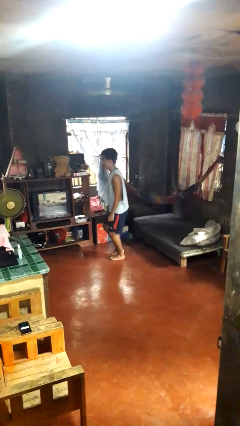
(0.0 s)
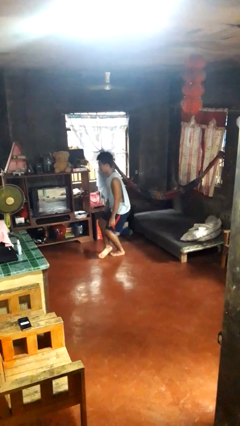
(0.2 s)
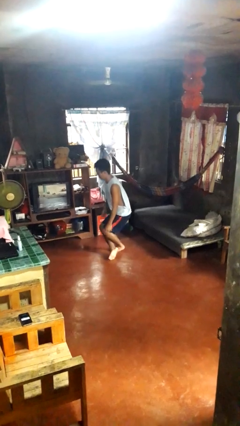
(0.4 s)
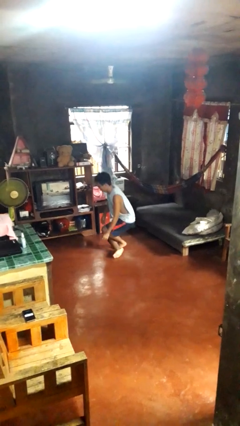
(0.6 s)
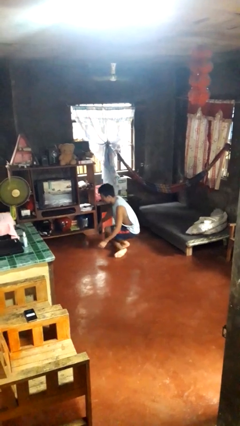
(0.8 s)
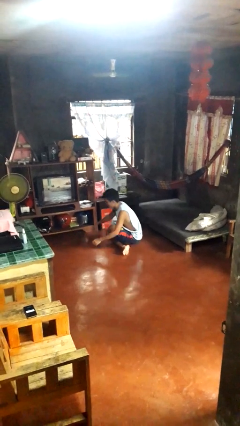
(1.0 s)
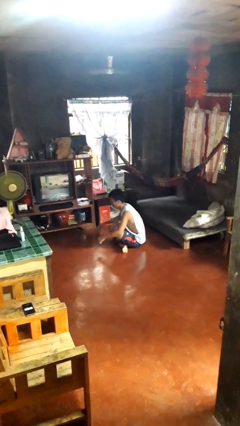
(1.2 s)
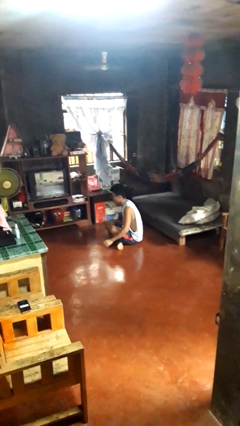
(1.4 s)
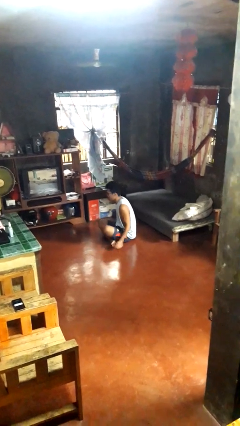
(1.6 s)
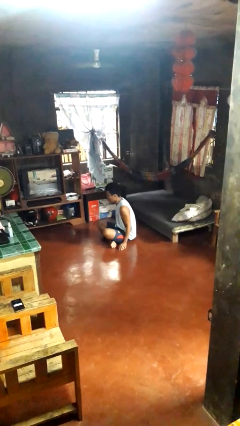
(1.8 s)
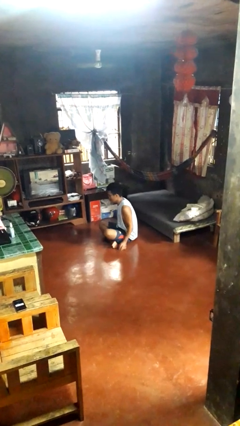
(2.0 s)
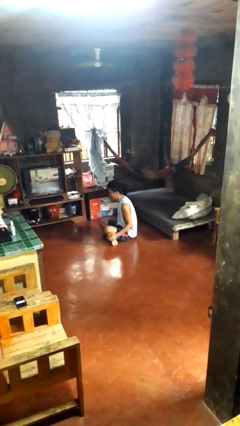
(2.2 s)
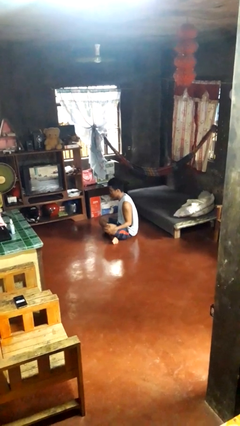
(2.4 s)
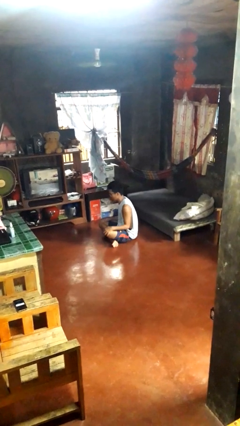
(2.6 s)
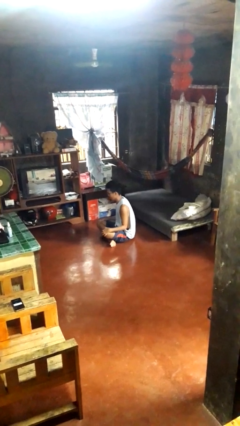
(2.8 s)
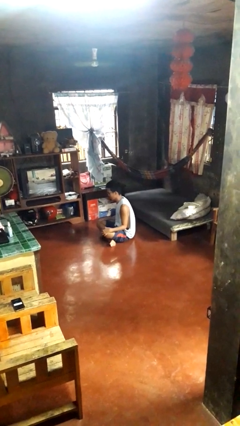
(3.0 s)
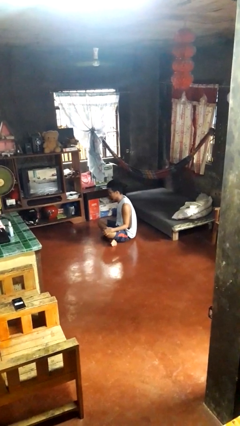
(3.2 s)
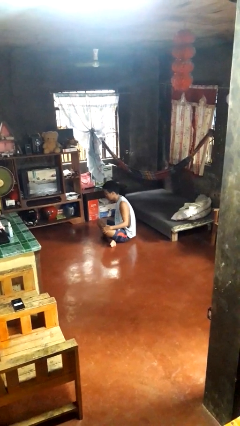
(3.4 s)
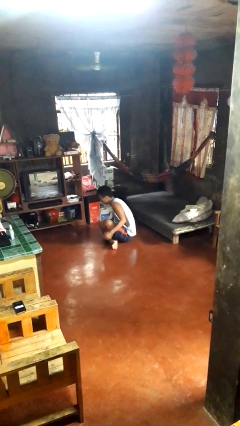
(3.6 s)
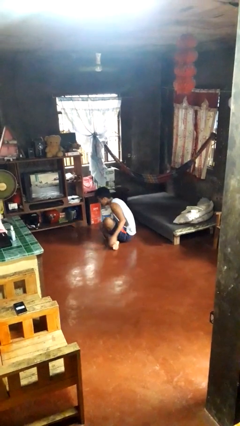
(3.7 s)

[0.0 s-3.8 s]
person sits crisscross

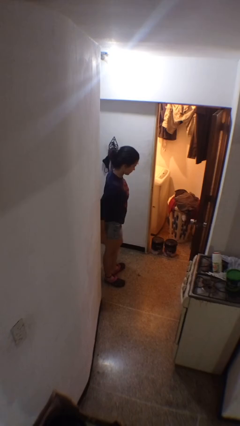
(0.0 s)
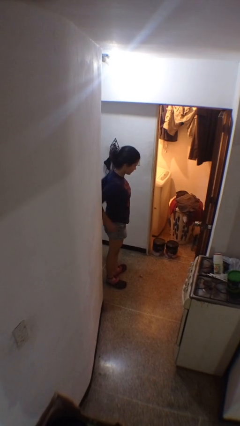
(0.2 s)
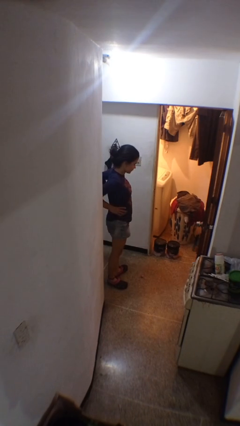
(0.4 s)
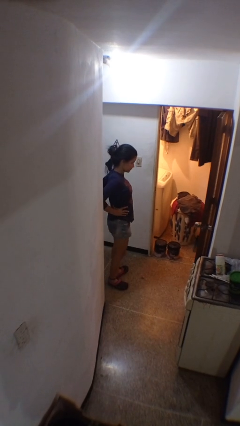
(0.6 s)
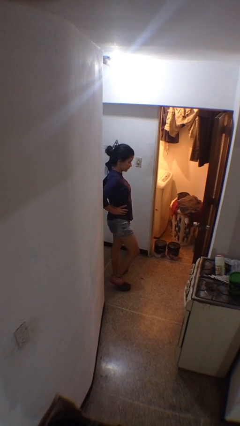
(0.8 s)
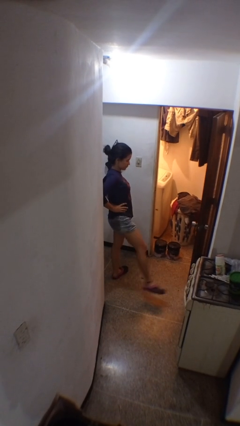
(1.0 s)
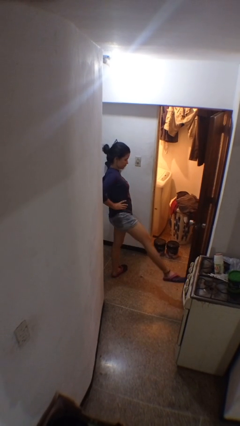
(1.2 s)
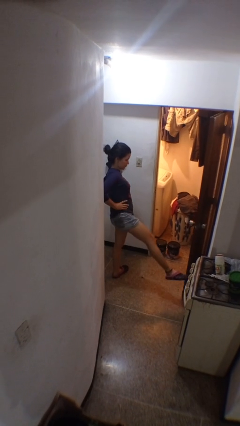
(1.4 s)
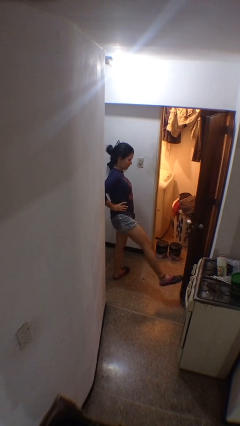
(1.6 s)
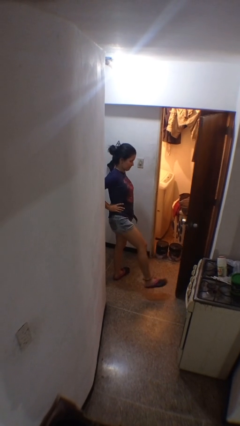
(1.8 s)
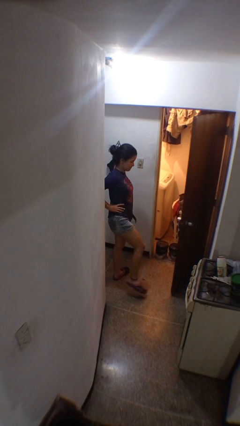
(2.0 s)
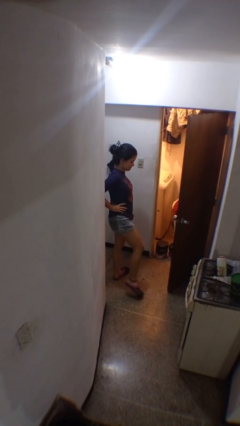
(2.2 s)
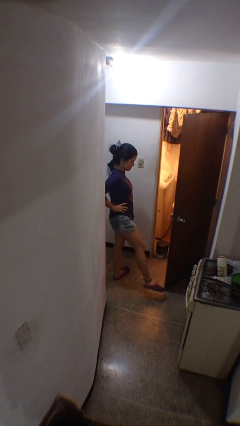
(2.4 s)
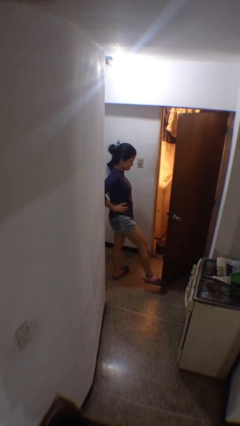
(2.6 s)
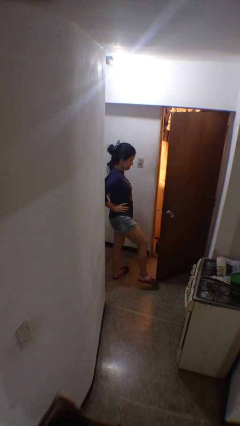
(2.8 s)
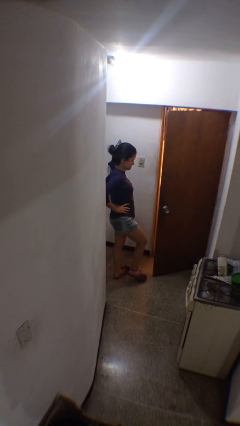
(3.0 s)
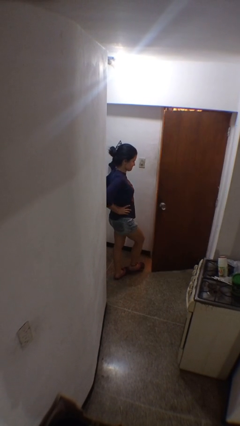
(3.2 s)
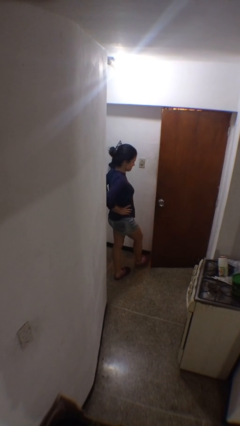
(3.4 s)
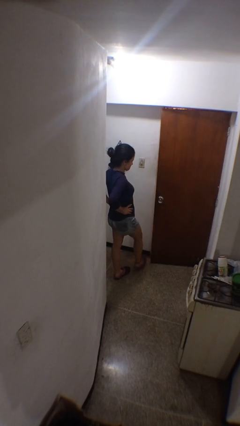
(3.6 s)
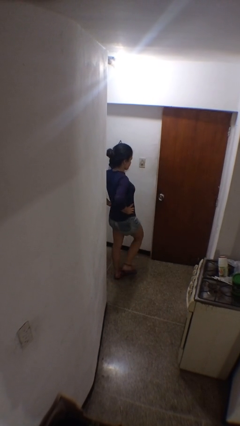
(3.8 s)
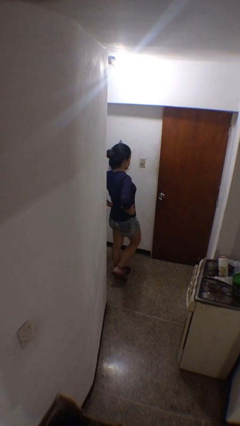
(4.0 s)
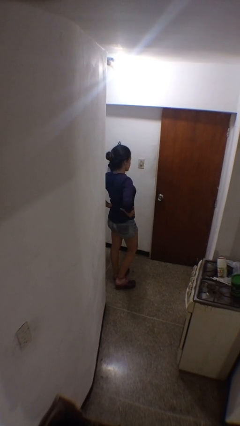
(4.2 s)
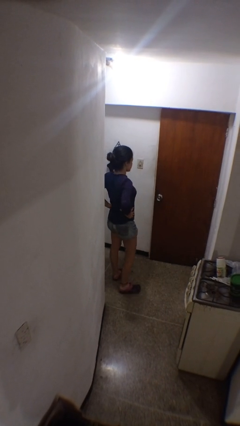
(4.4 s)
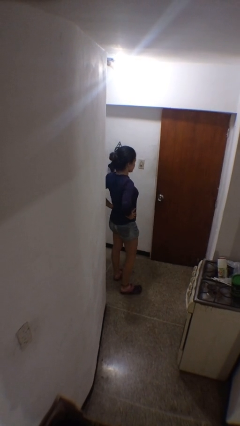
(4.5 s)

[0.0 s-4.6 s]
person closes door with foot

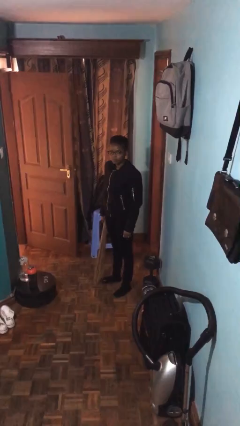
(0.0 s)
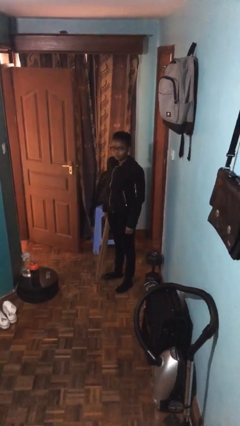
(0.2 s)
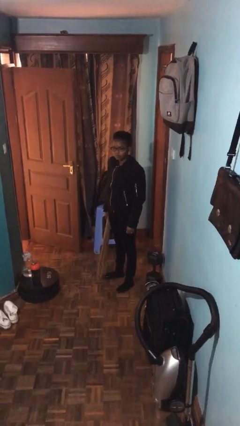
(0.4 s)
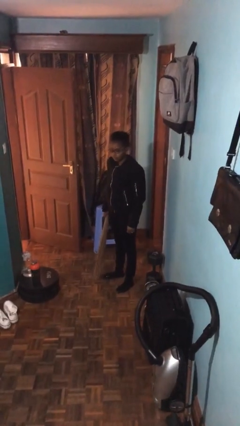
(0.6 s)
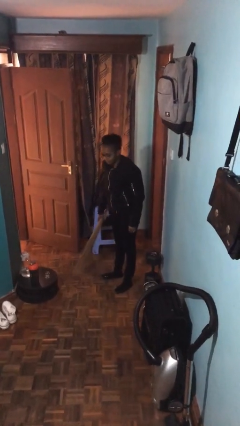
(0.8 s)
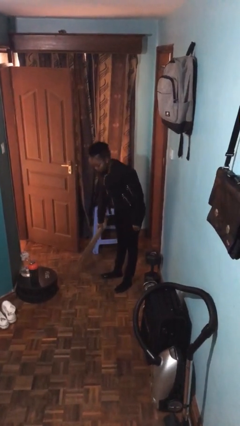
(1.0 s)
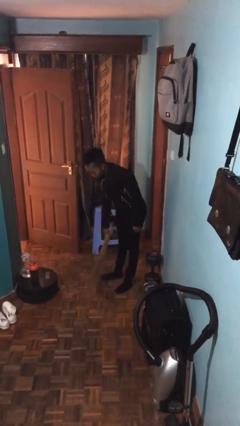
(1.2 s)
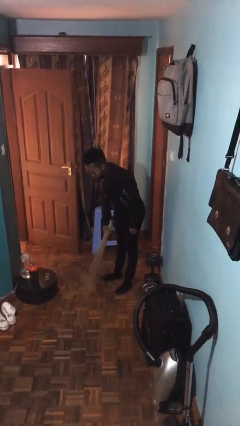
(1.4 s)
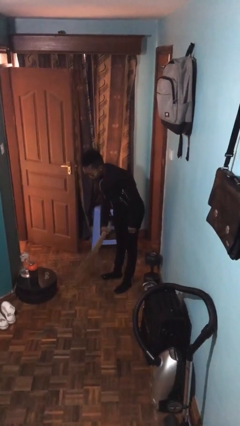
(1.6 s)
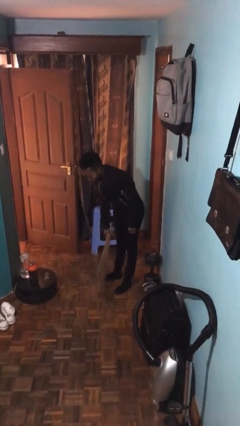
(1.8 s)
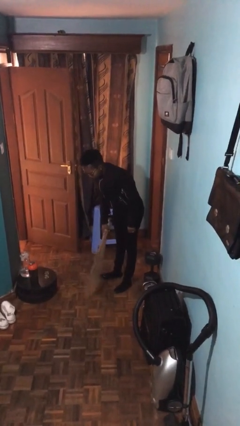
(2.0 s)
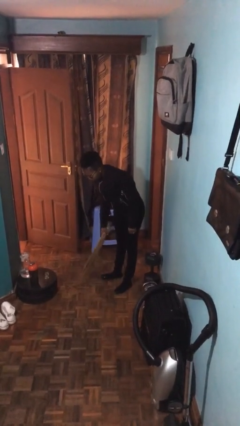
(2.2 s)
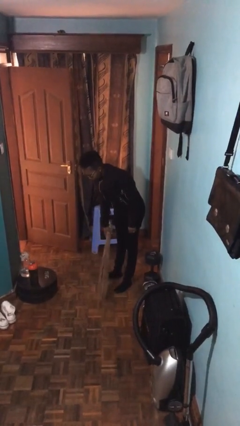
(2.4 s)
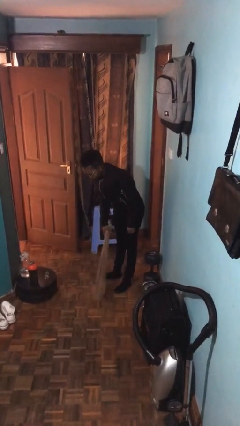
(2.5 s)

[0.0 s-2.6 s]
person sweeps floor

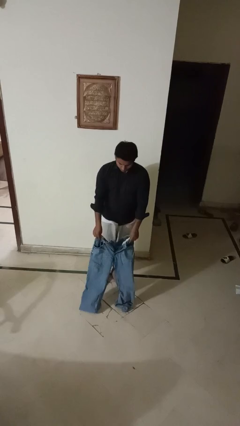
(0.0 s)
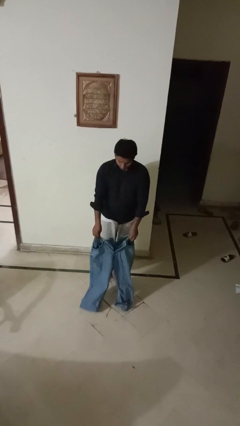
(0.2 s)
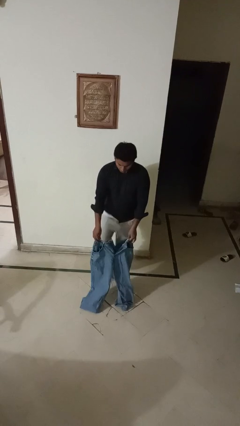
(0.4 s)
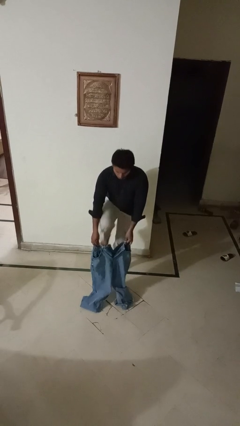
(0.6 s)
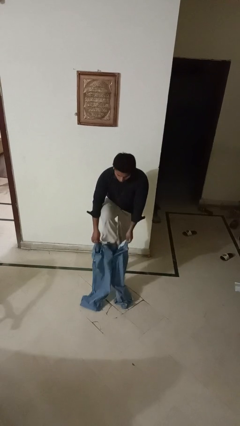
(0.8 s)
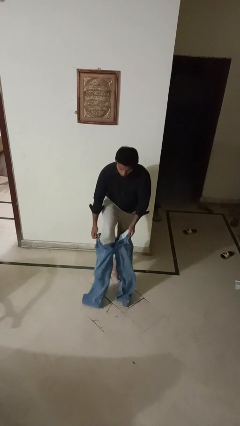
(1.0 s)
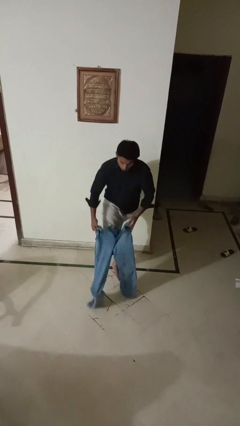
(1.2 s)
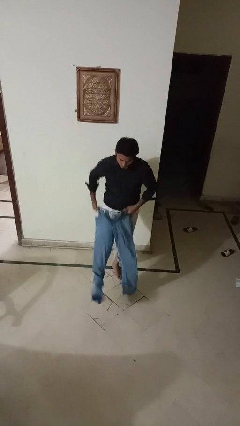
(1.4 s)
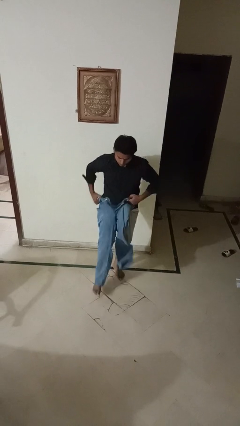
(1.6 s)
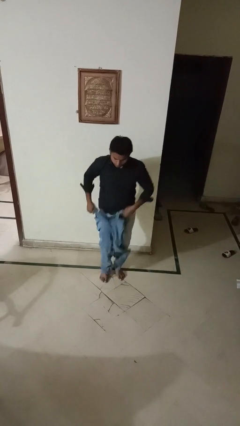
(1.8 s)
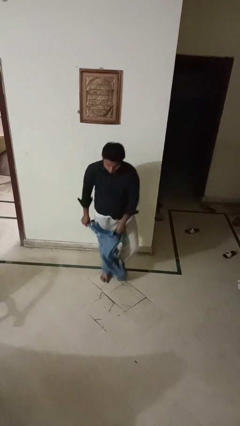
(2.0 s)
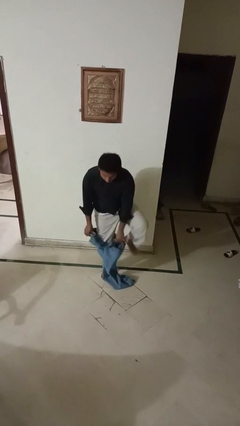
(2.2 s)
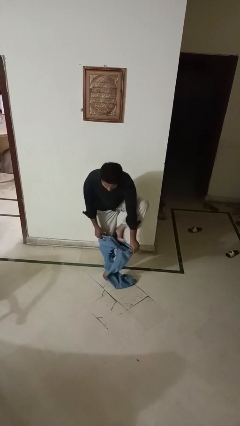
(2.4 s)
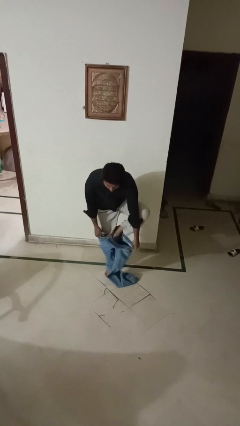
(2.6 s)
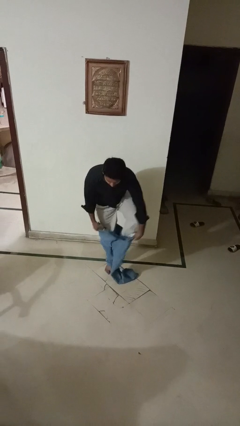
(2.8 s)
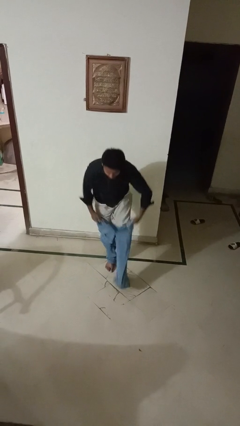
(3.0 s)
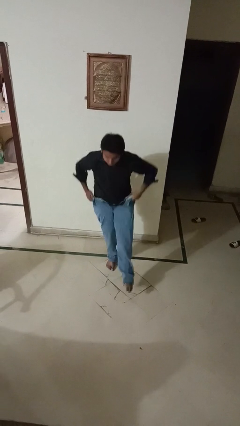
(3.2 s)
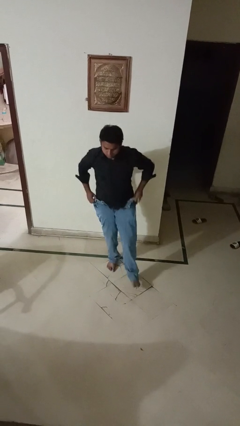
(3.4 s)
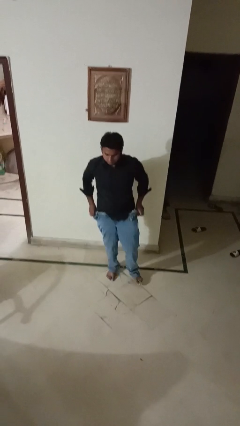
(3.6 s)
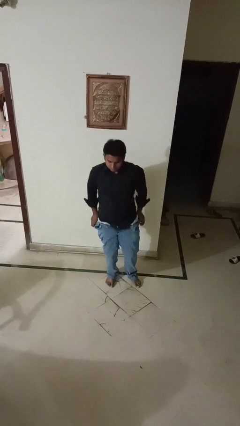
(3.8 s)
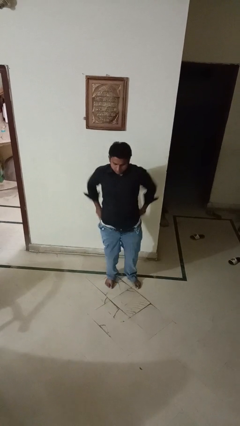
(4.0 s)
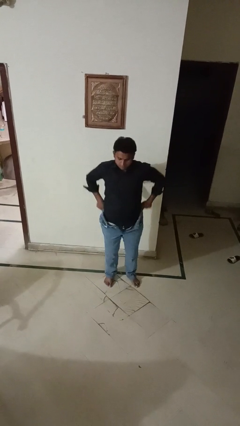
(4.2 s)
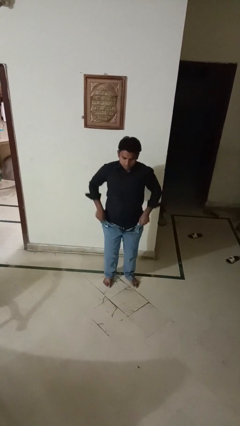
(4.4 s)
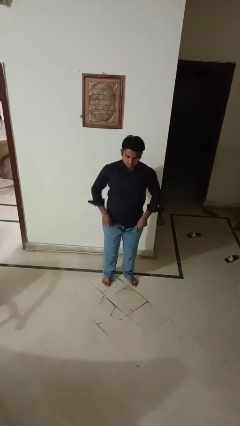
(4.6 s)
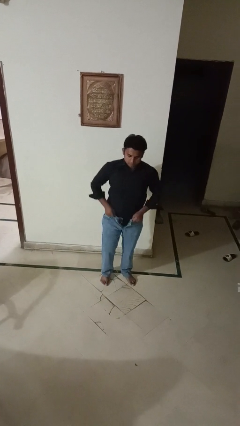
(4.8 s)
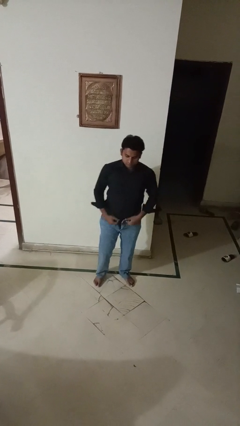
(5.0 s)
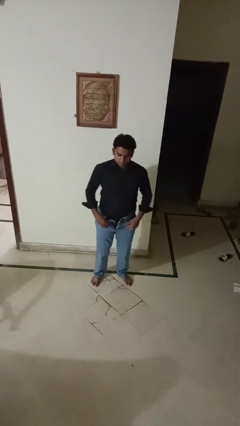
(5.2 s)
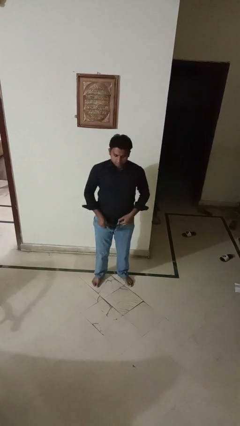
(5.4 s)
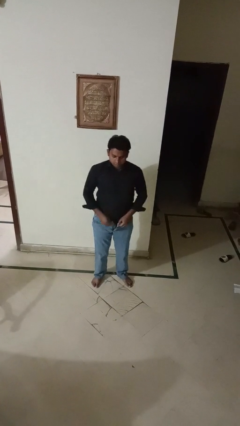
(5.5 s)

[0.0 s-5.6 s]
person puts on pants

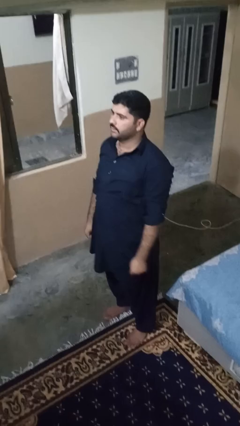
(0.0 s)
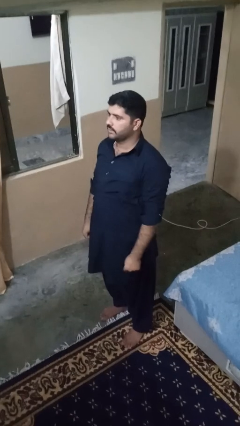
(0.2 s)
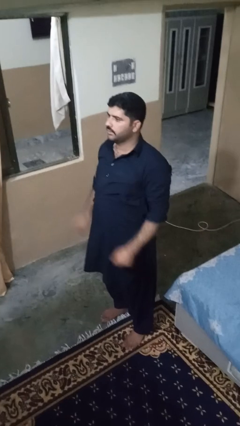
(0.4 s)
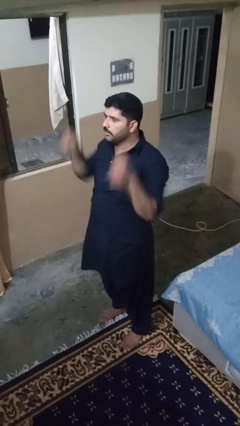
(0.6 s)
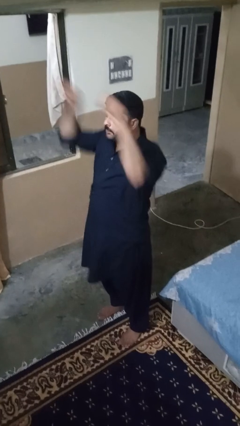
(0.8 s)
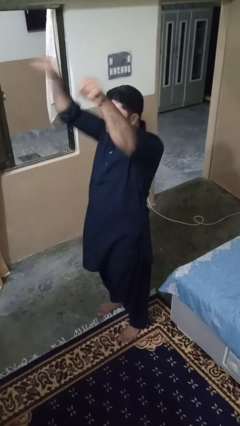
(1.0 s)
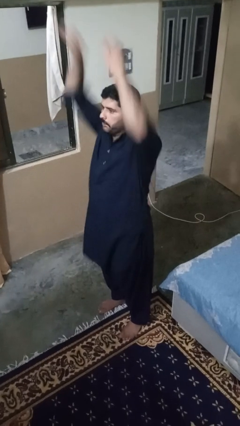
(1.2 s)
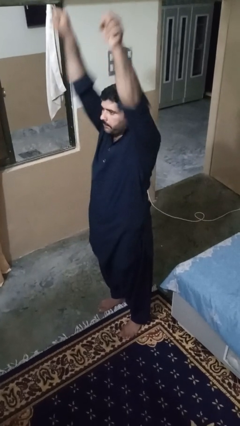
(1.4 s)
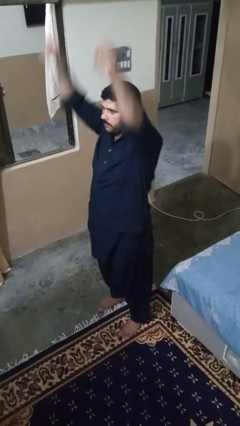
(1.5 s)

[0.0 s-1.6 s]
person punches
